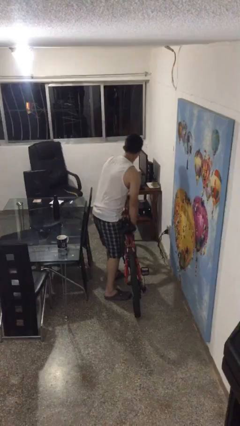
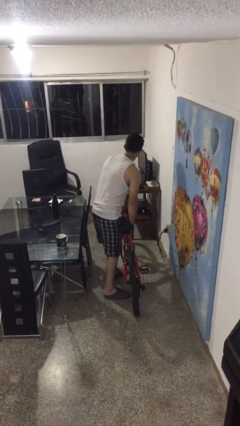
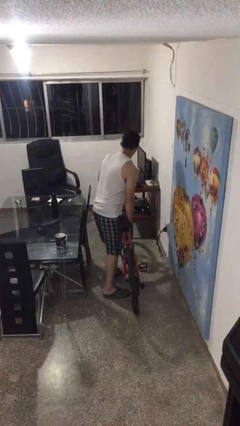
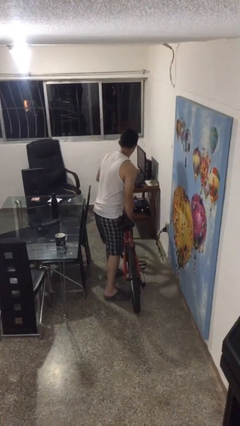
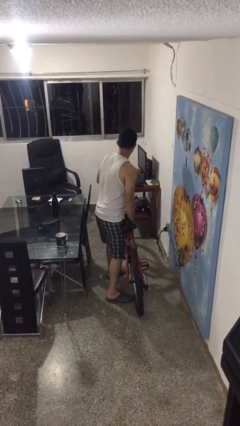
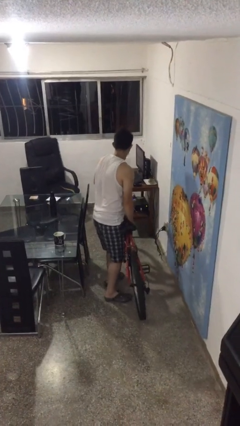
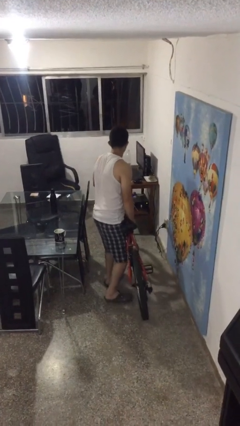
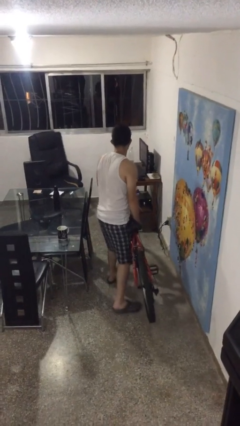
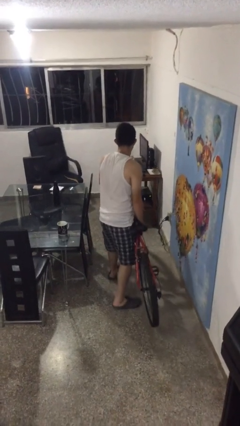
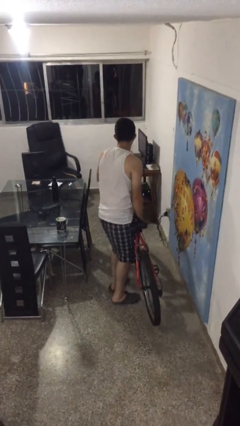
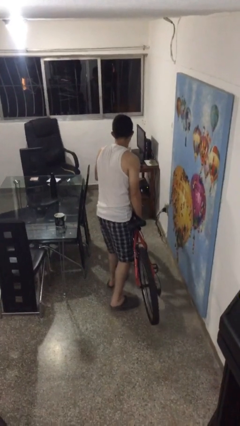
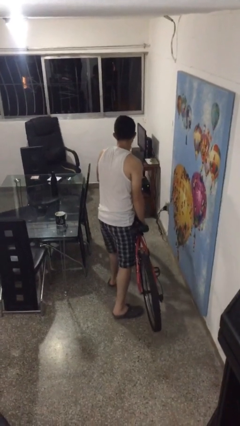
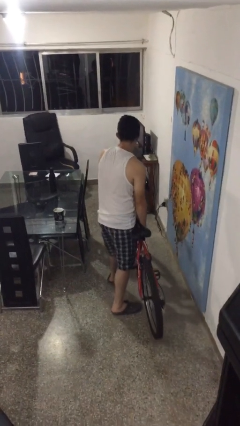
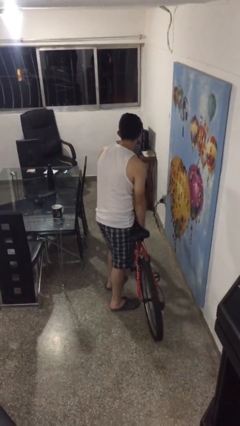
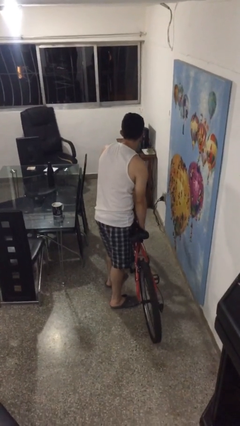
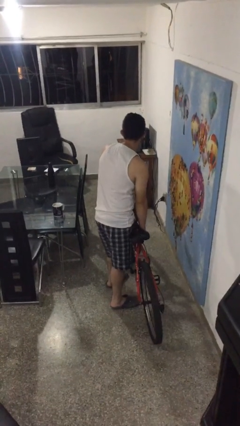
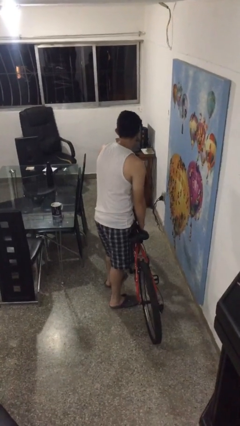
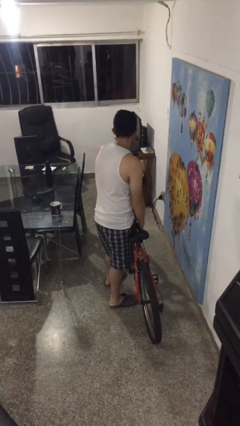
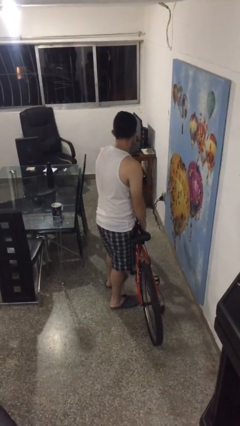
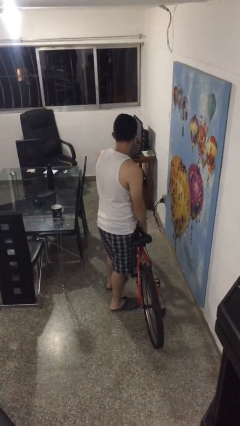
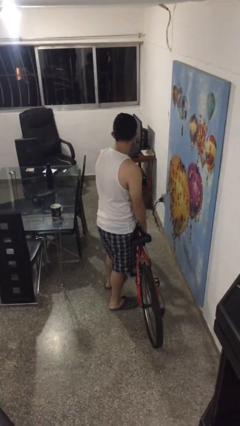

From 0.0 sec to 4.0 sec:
person carries bicycle

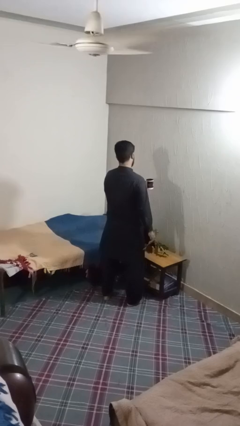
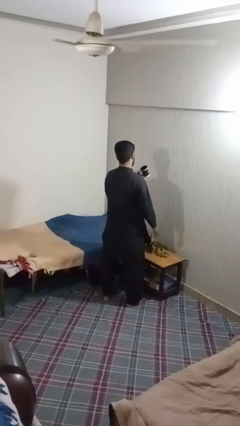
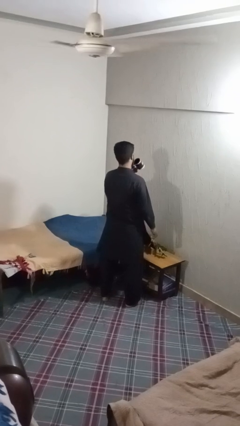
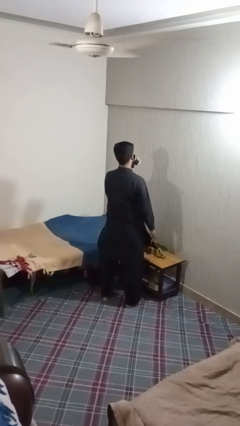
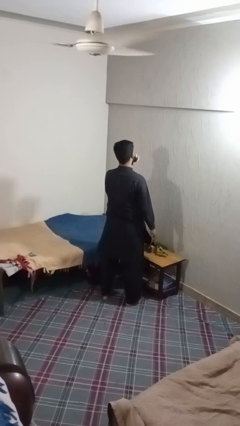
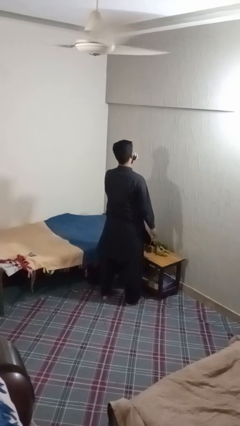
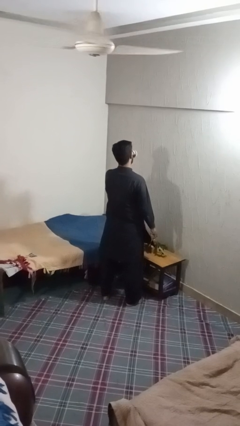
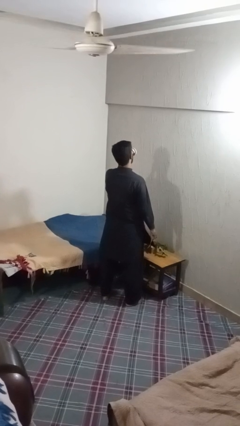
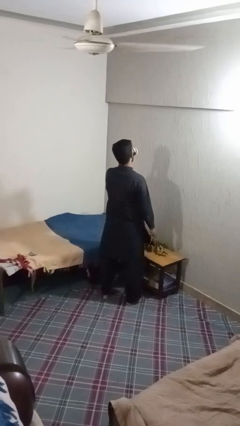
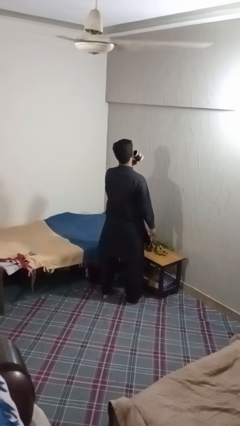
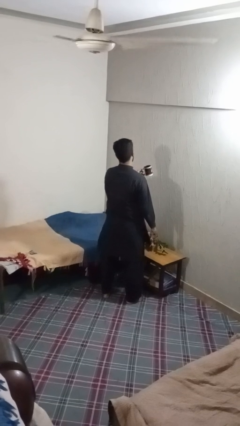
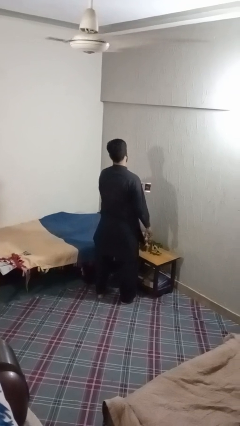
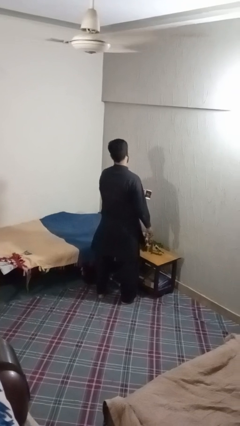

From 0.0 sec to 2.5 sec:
person drinks from mug

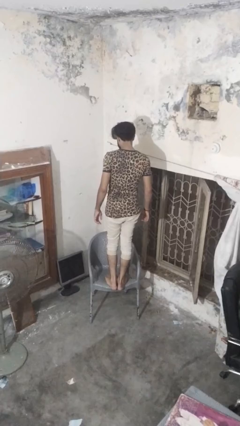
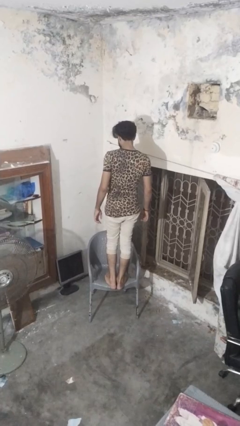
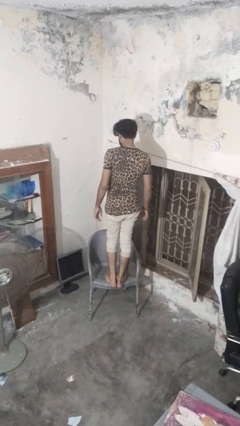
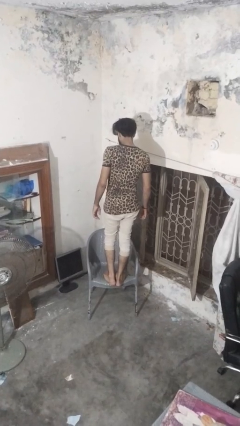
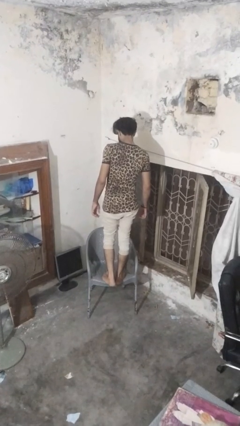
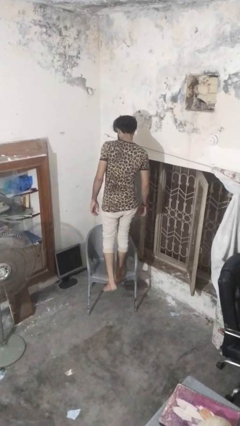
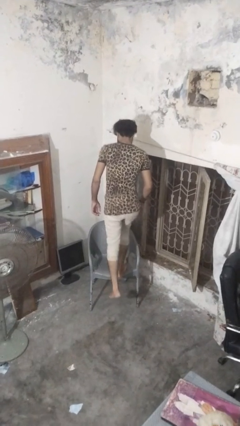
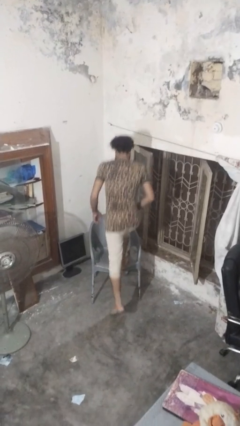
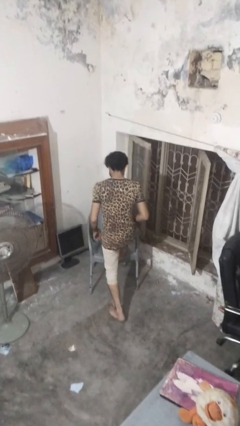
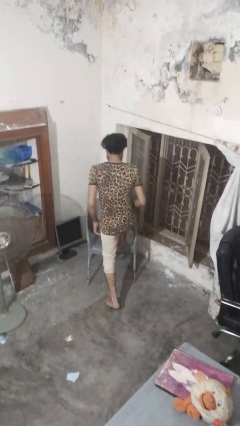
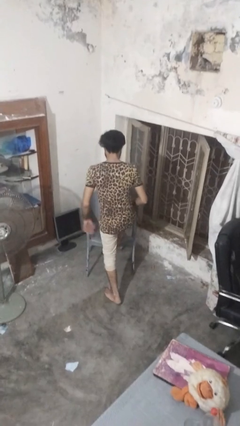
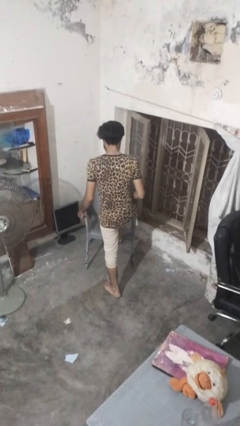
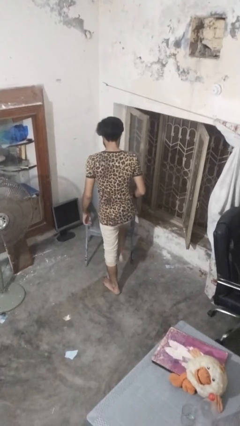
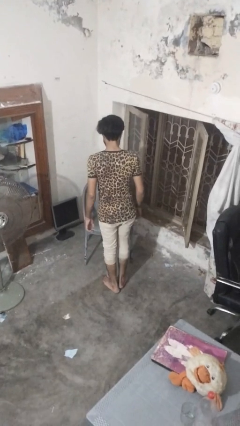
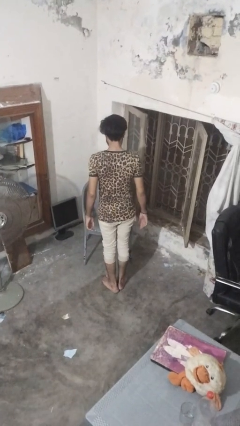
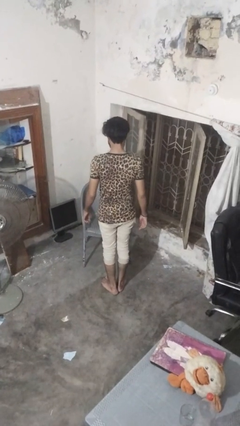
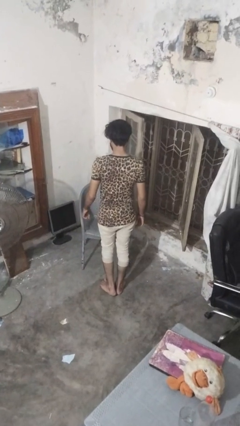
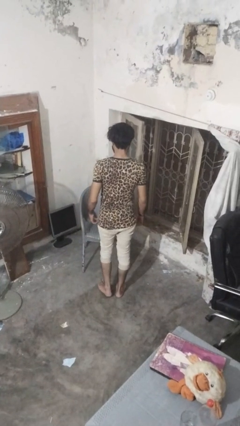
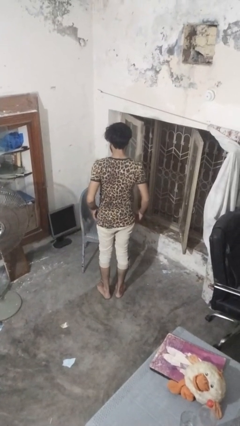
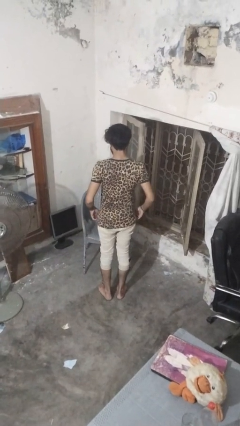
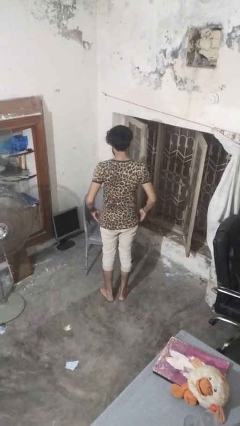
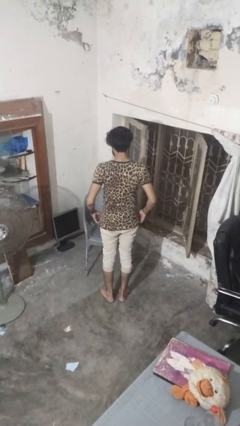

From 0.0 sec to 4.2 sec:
person climbs off chair

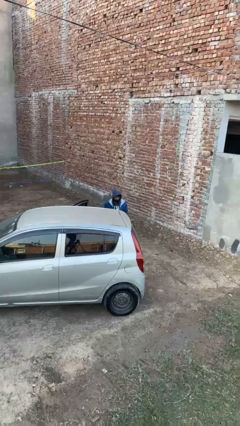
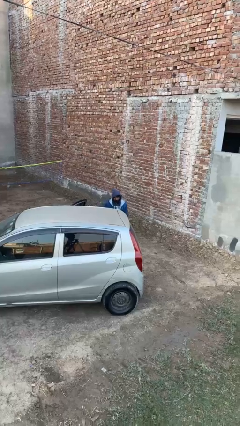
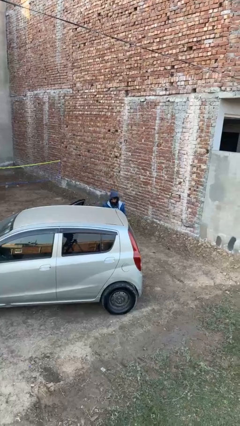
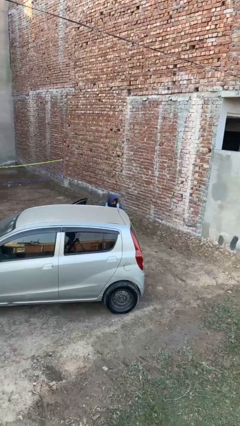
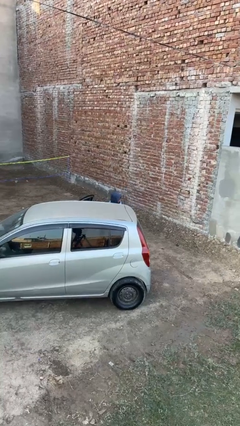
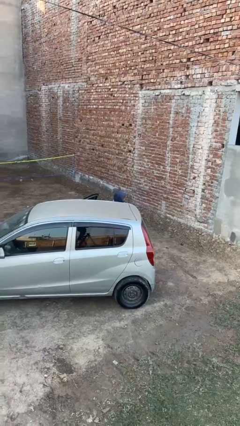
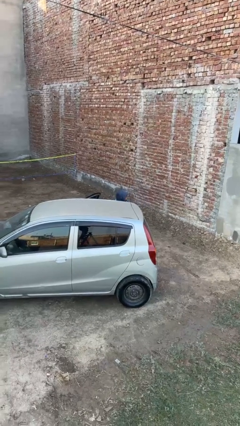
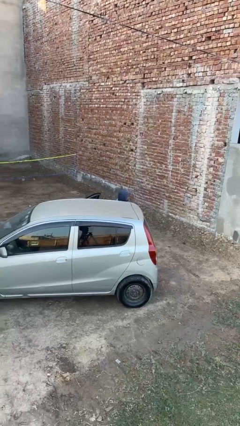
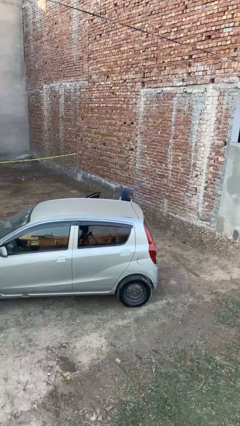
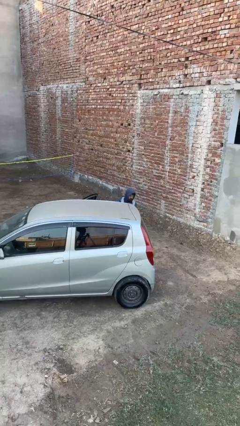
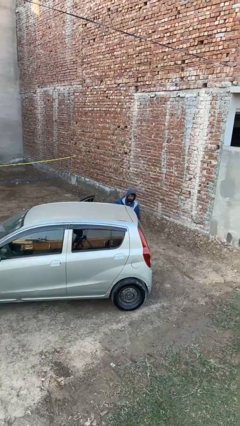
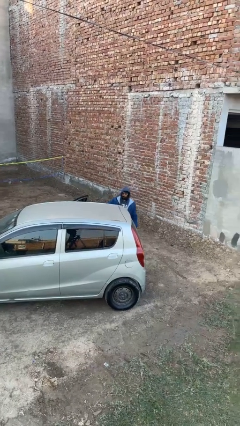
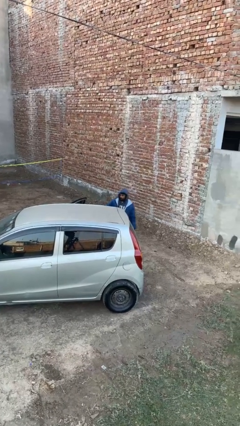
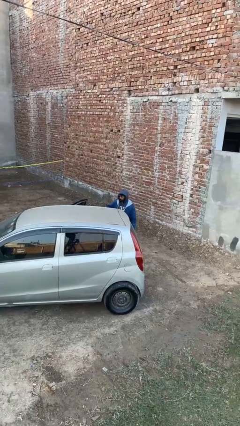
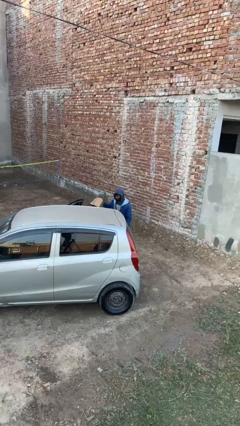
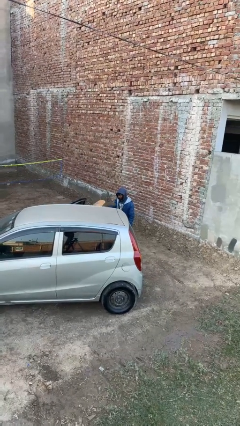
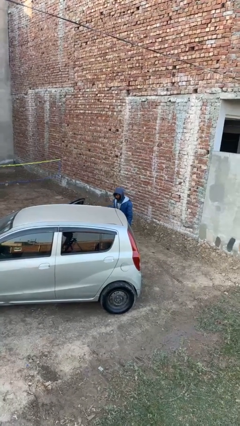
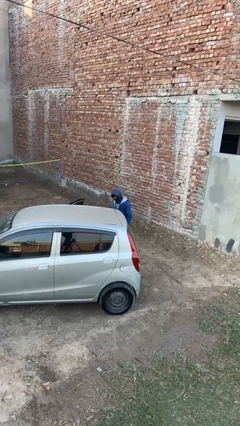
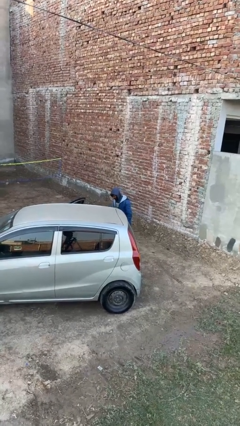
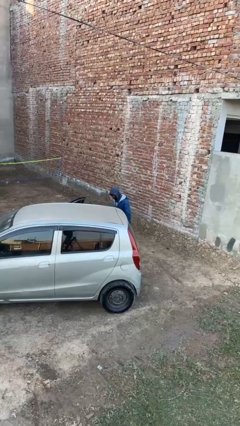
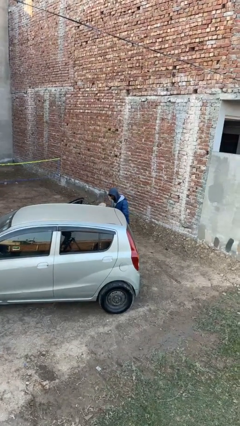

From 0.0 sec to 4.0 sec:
person unloads car

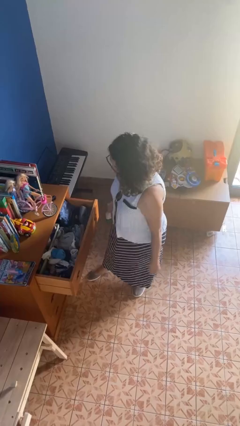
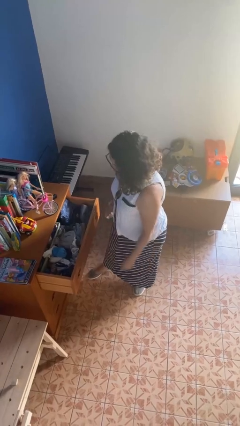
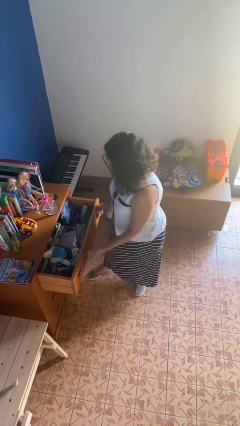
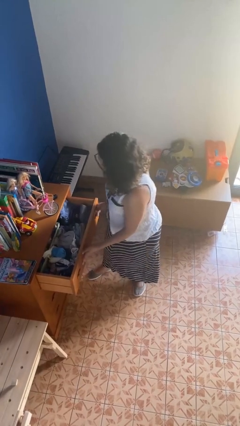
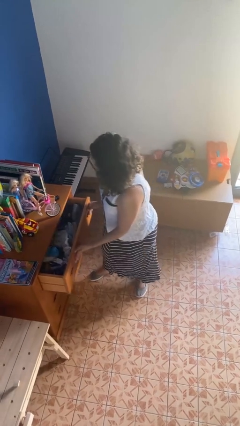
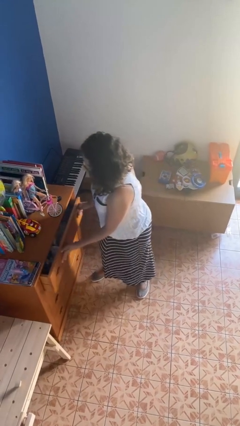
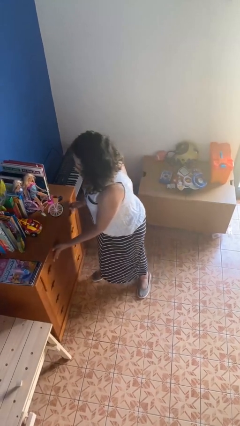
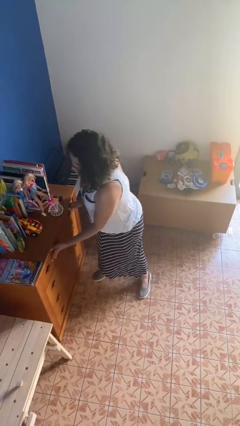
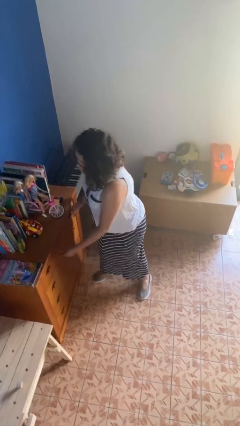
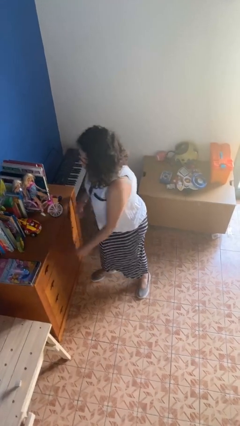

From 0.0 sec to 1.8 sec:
person closes dresser drawer

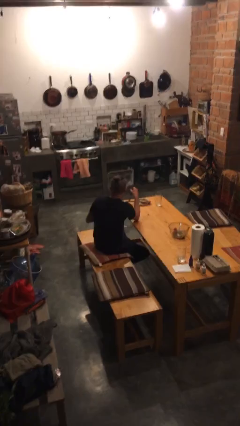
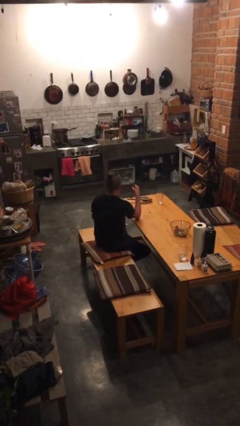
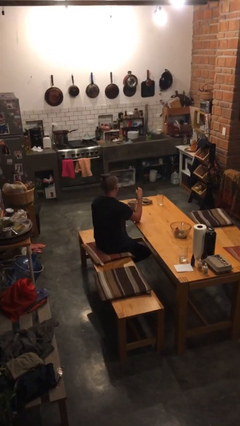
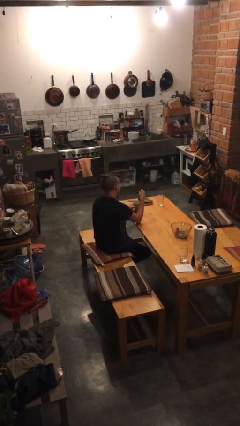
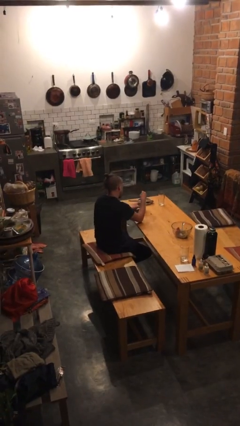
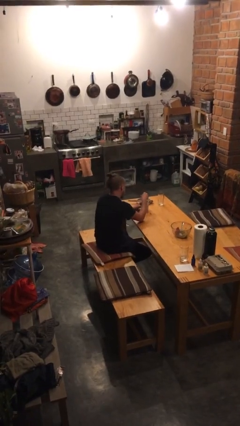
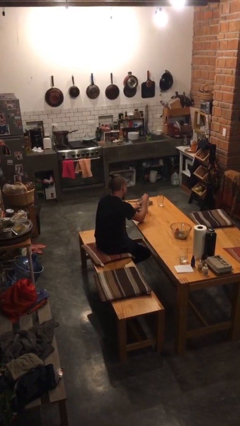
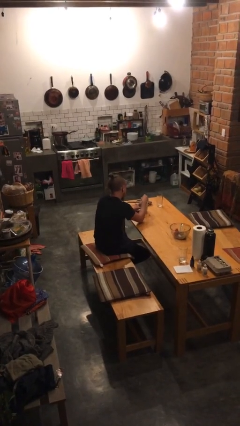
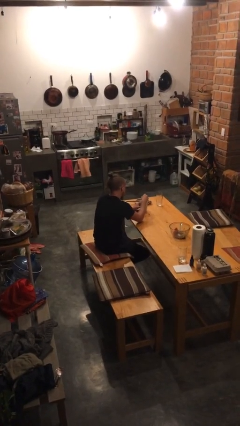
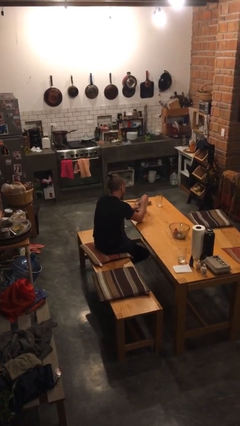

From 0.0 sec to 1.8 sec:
person stirs mug
